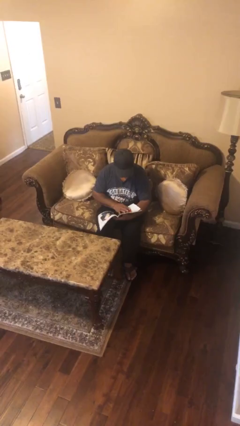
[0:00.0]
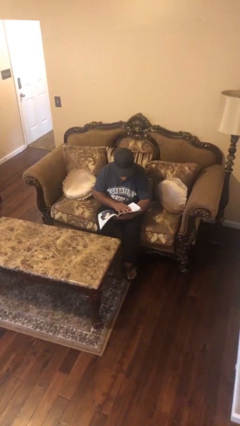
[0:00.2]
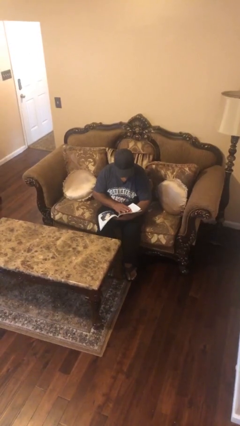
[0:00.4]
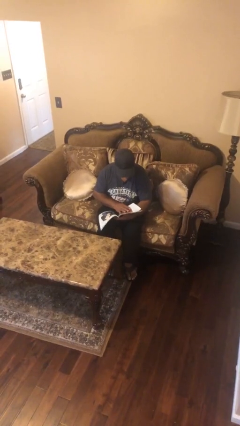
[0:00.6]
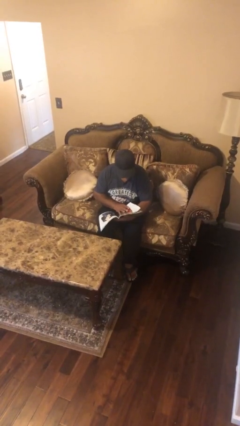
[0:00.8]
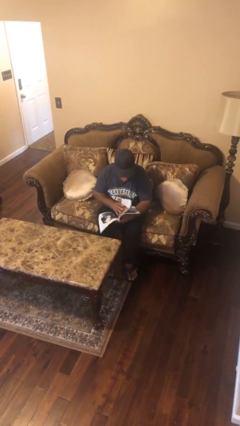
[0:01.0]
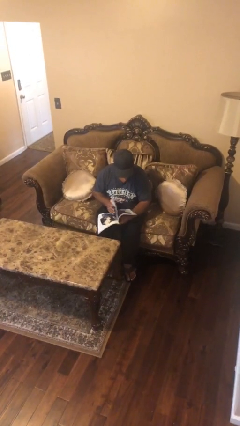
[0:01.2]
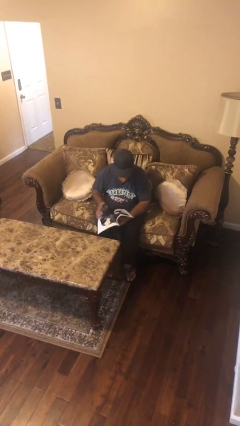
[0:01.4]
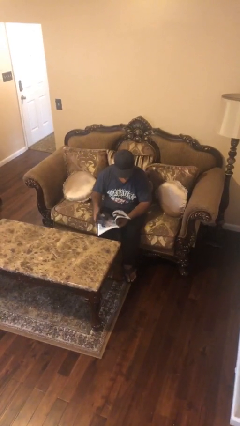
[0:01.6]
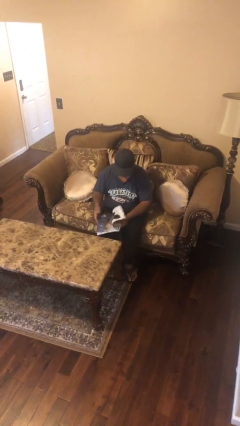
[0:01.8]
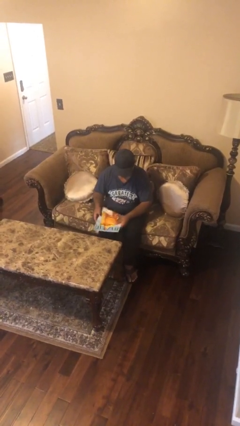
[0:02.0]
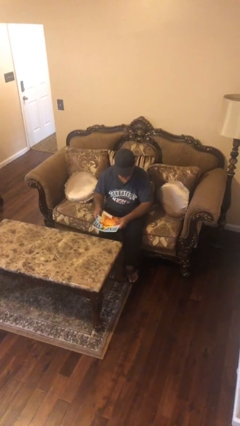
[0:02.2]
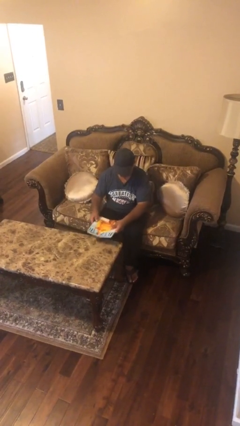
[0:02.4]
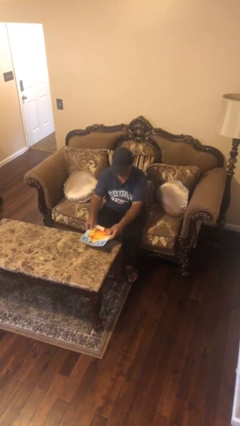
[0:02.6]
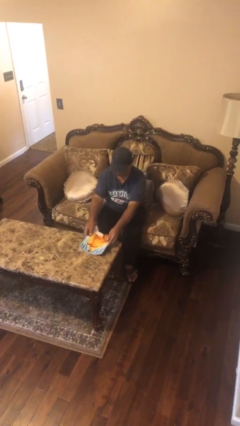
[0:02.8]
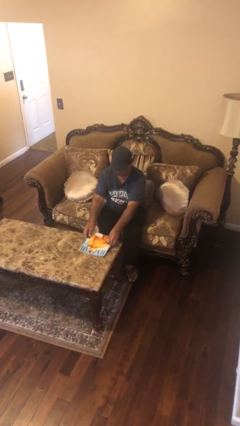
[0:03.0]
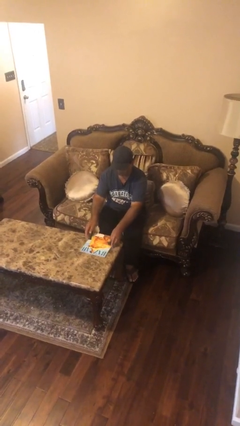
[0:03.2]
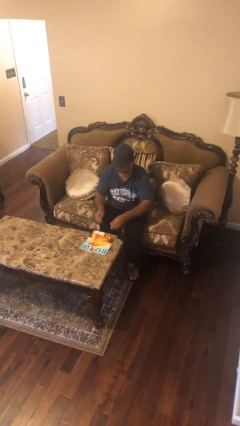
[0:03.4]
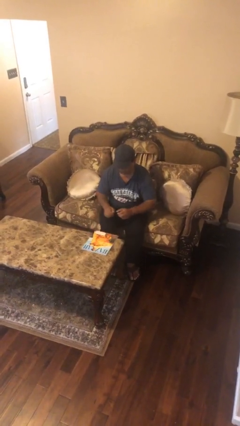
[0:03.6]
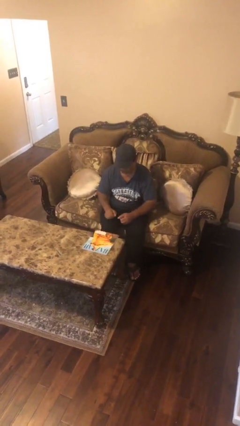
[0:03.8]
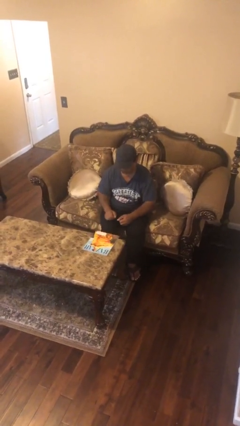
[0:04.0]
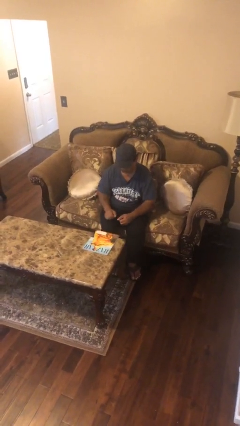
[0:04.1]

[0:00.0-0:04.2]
person puts down object on table

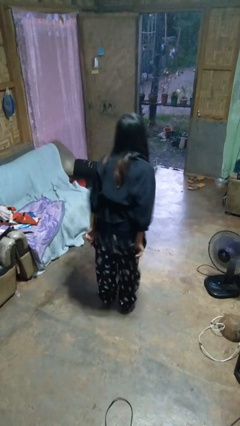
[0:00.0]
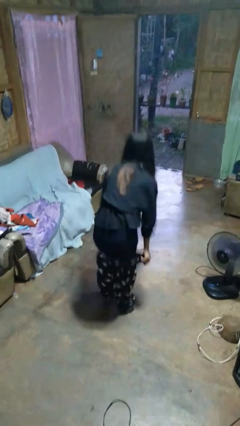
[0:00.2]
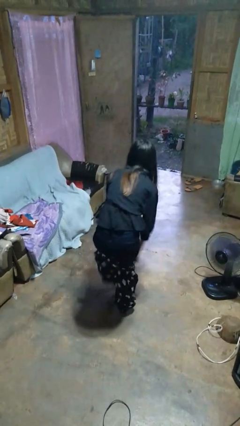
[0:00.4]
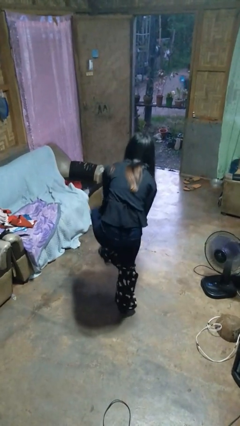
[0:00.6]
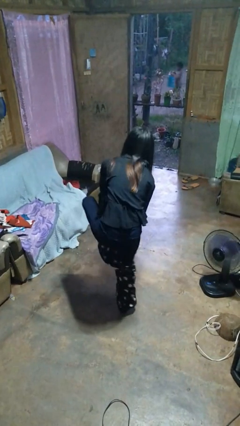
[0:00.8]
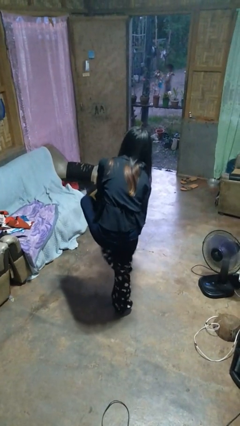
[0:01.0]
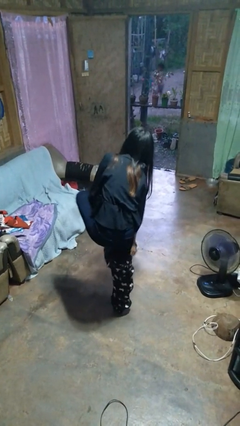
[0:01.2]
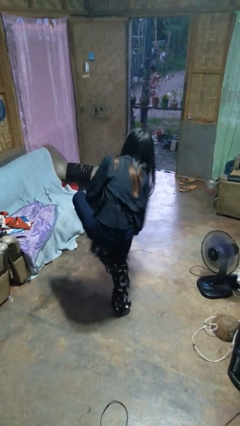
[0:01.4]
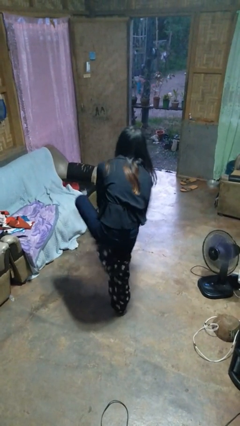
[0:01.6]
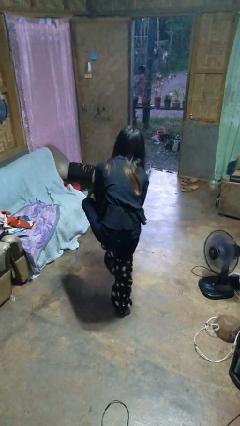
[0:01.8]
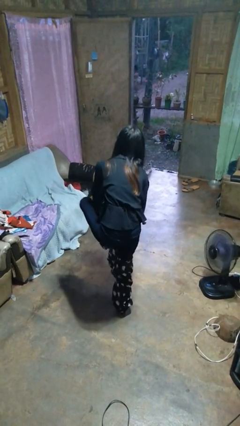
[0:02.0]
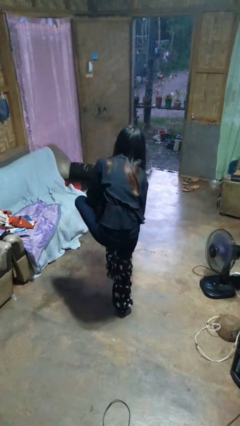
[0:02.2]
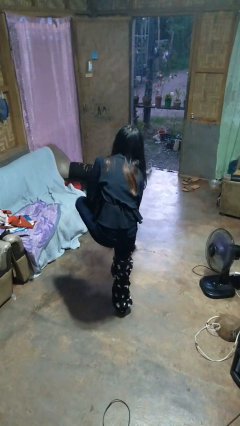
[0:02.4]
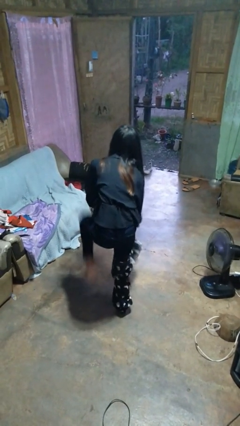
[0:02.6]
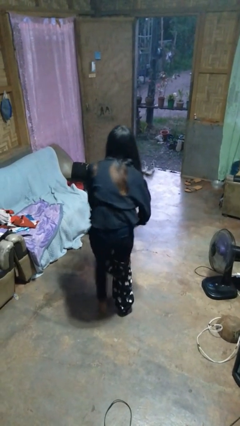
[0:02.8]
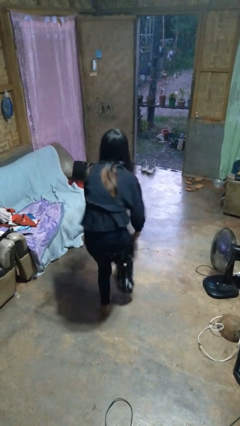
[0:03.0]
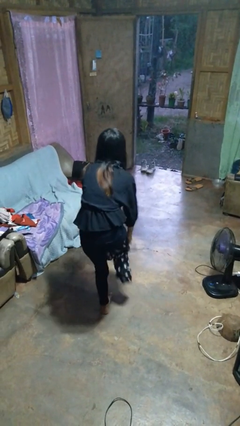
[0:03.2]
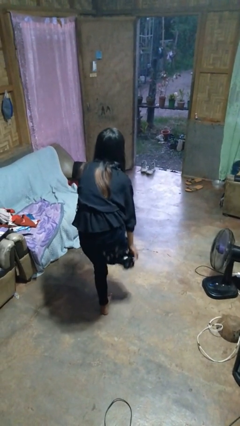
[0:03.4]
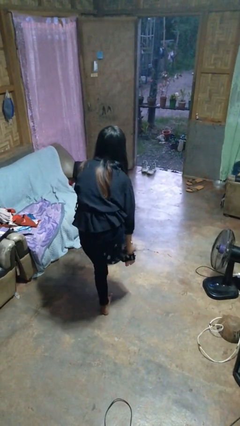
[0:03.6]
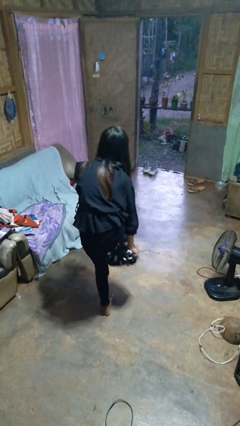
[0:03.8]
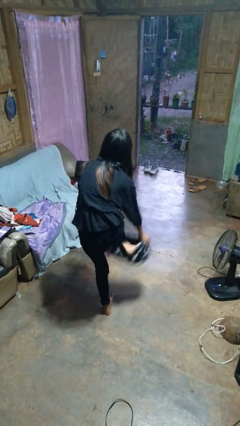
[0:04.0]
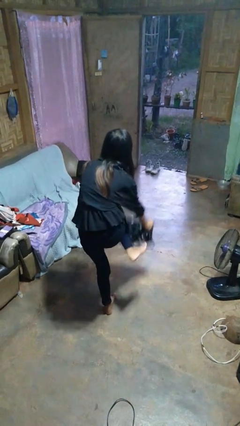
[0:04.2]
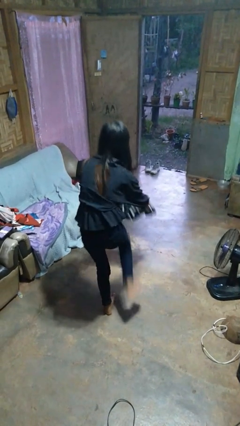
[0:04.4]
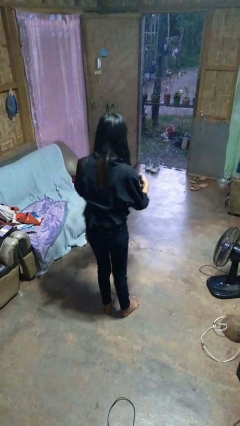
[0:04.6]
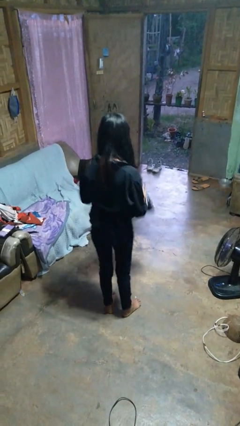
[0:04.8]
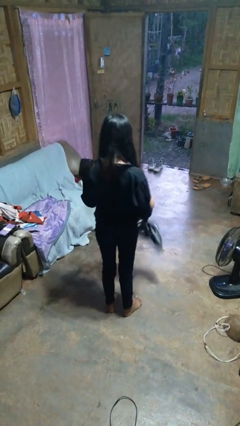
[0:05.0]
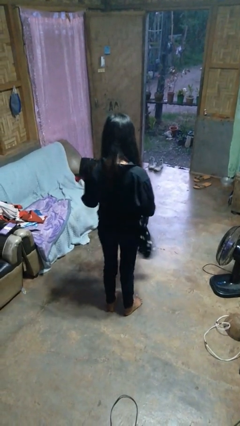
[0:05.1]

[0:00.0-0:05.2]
person takes off pants

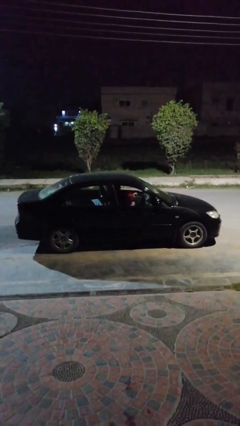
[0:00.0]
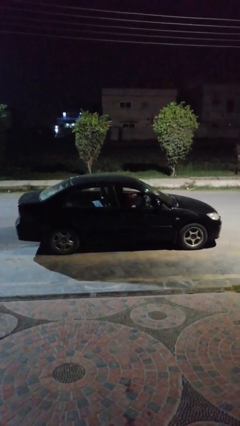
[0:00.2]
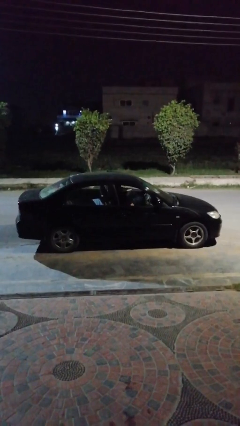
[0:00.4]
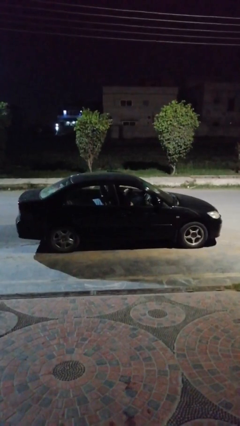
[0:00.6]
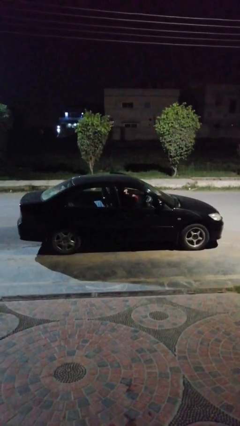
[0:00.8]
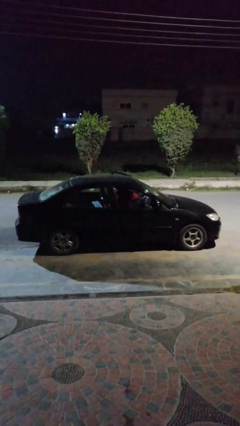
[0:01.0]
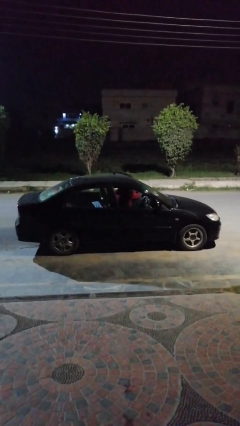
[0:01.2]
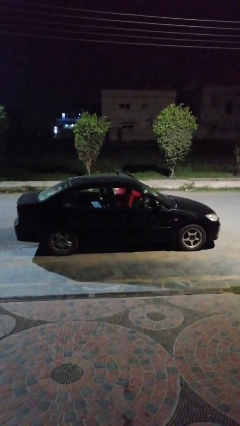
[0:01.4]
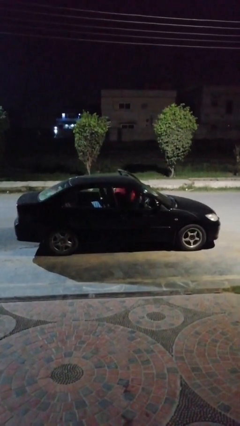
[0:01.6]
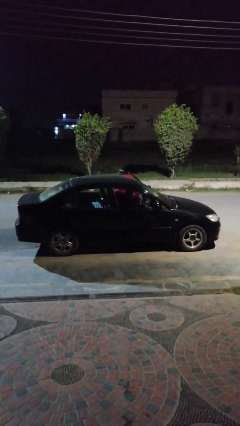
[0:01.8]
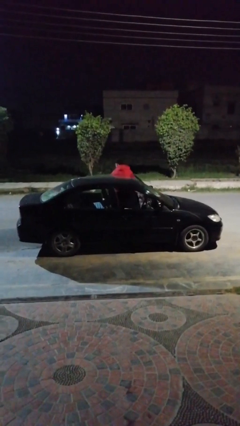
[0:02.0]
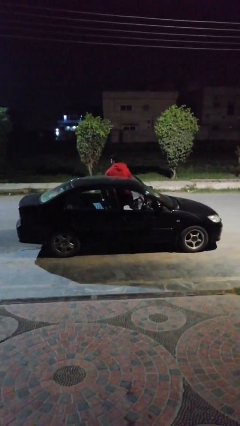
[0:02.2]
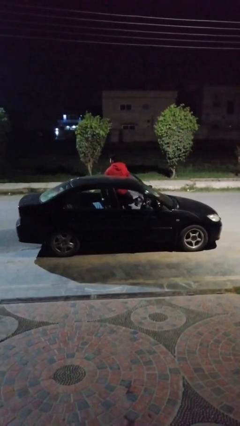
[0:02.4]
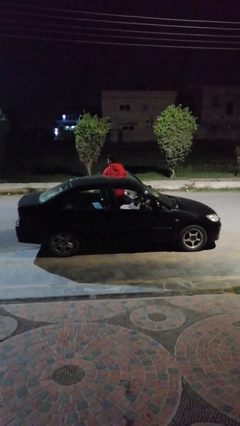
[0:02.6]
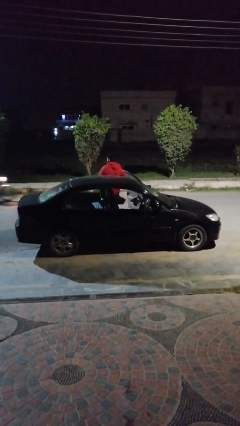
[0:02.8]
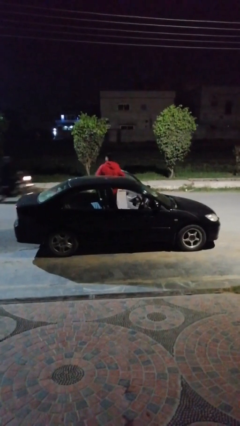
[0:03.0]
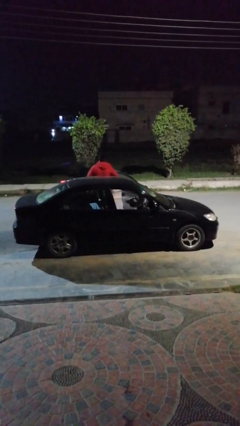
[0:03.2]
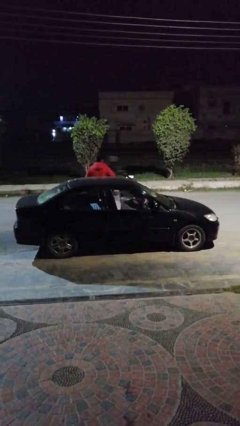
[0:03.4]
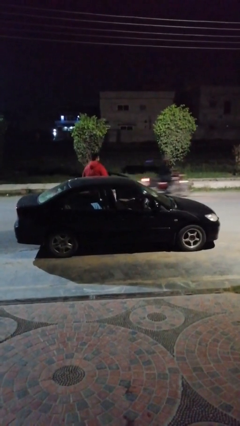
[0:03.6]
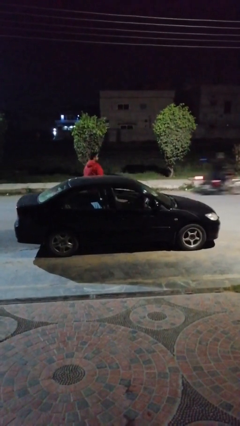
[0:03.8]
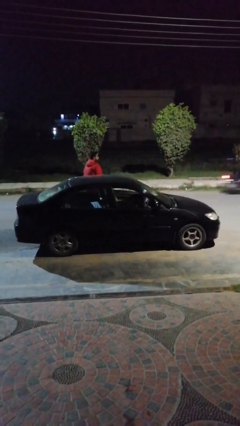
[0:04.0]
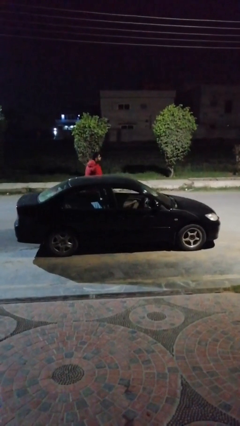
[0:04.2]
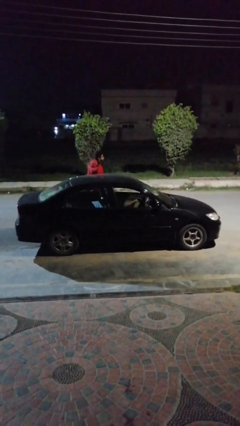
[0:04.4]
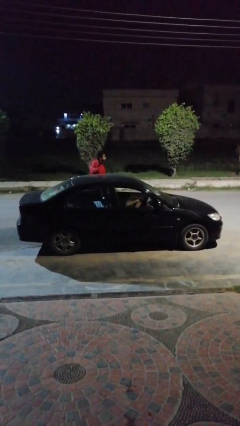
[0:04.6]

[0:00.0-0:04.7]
car drops off person

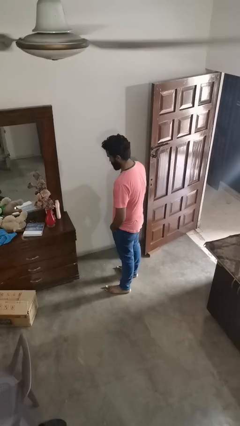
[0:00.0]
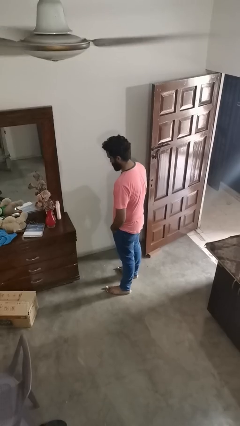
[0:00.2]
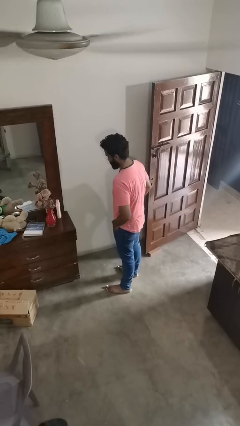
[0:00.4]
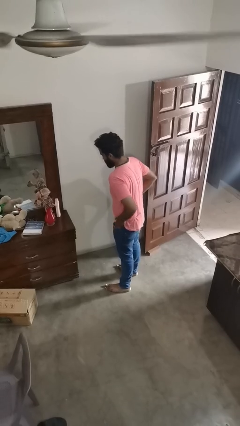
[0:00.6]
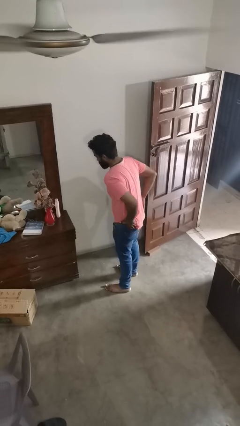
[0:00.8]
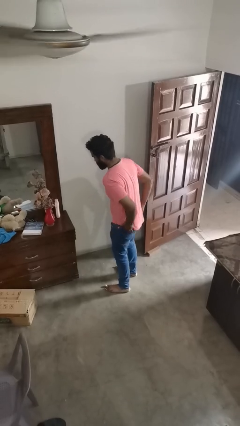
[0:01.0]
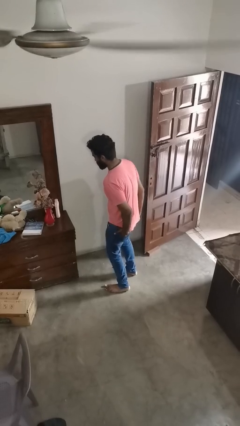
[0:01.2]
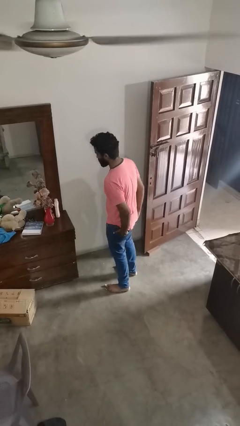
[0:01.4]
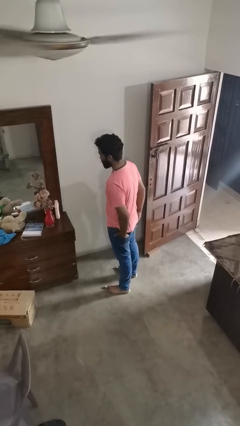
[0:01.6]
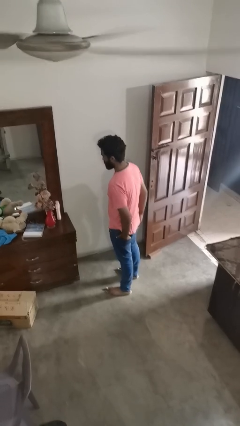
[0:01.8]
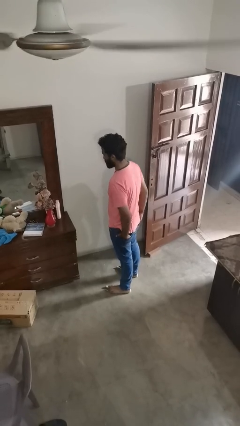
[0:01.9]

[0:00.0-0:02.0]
person puts hands in back pockets

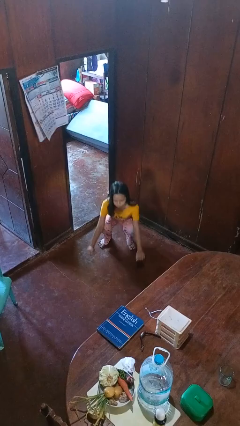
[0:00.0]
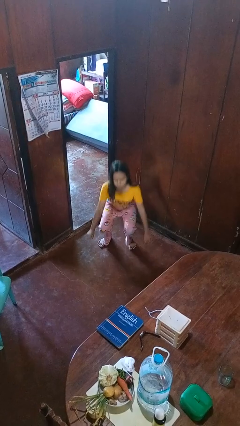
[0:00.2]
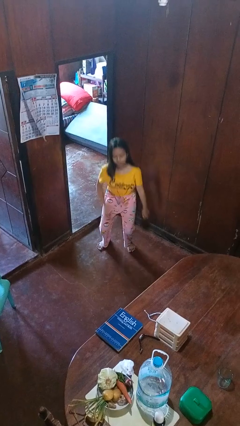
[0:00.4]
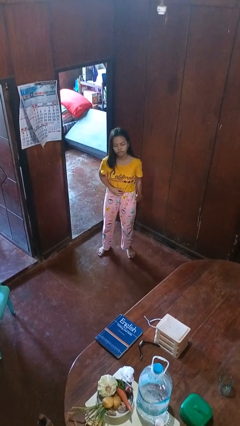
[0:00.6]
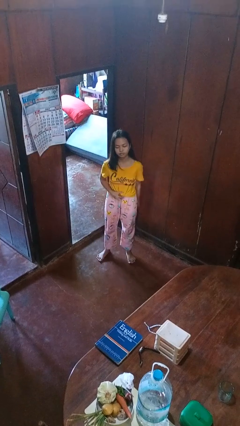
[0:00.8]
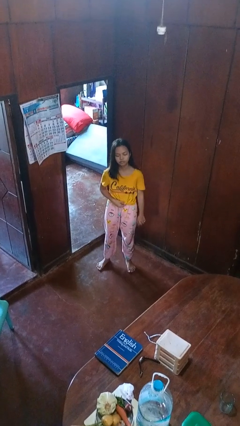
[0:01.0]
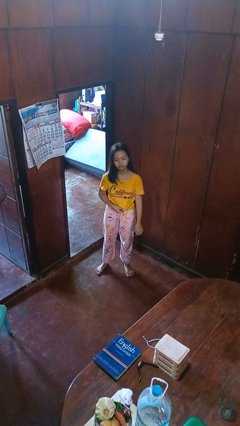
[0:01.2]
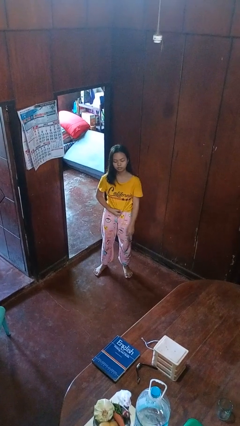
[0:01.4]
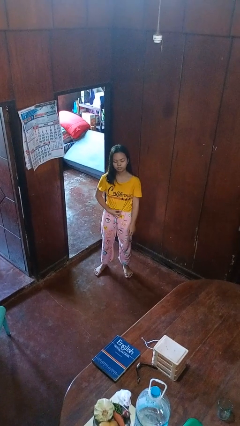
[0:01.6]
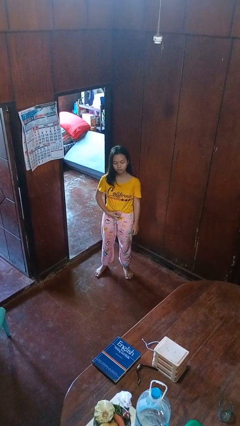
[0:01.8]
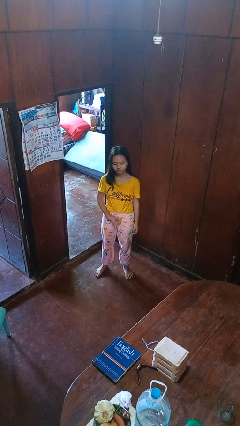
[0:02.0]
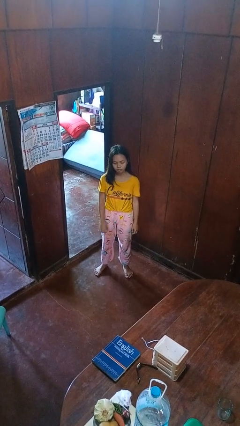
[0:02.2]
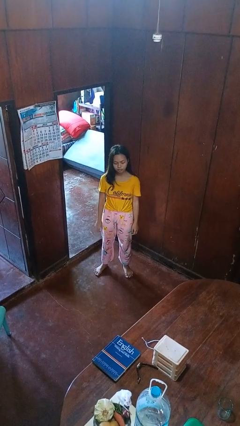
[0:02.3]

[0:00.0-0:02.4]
person stands up
